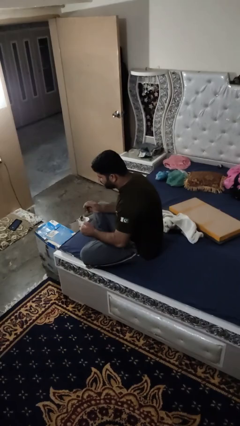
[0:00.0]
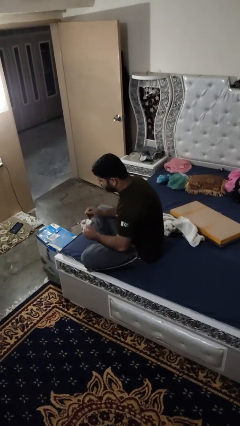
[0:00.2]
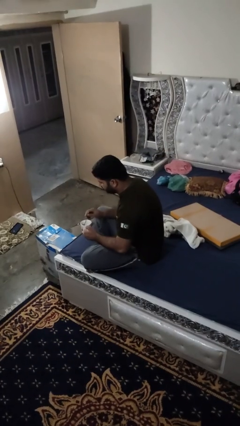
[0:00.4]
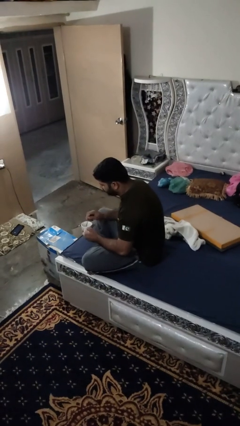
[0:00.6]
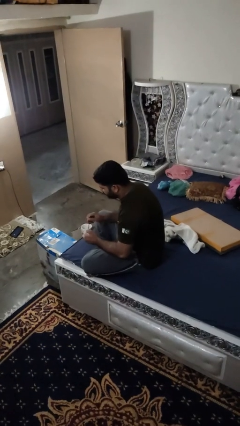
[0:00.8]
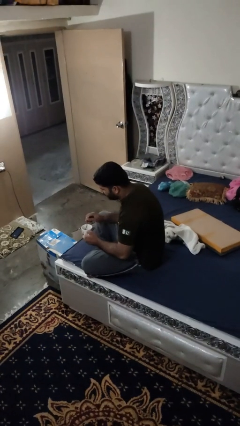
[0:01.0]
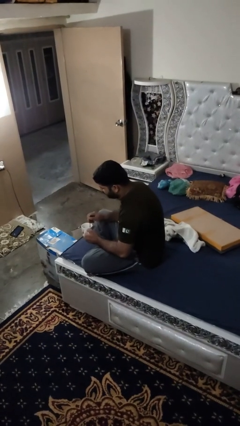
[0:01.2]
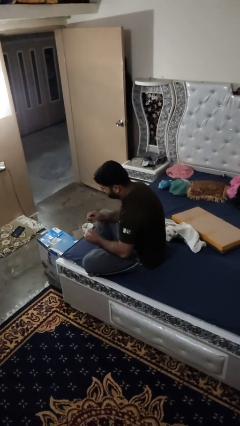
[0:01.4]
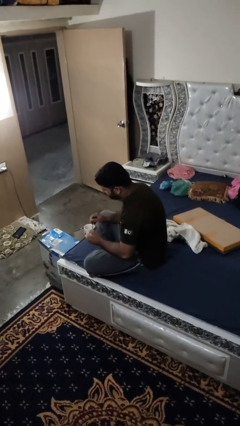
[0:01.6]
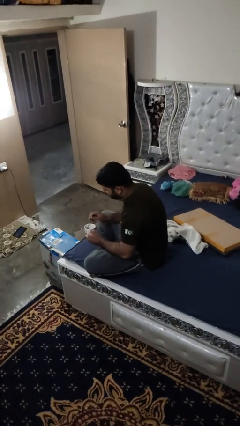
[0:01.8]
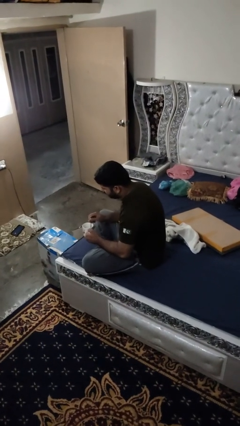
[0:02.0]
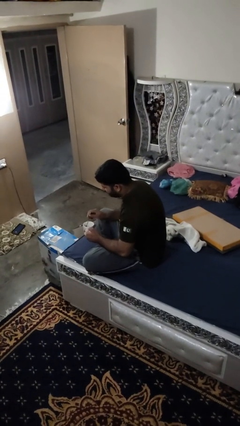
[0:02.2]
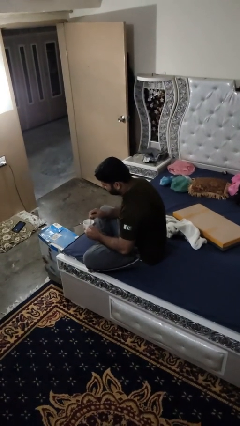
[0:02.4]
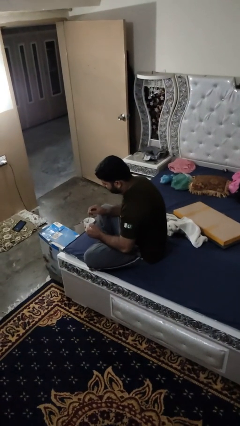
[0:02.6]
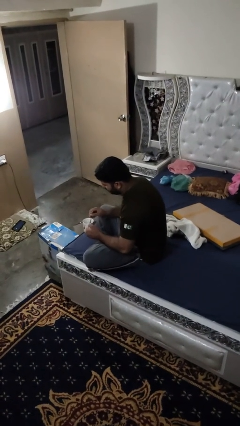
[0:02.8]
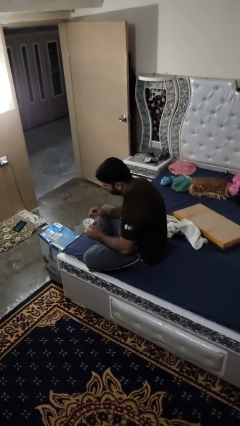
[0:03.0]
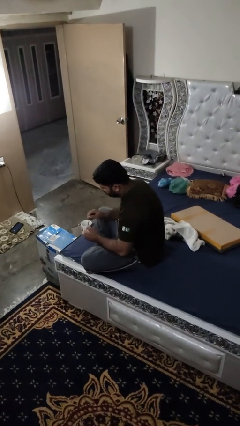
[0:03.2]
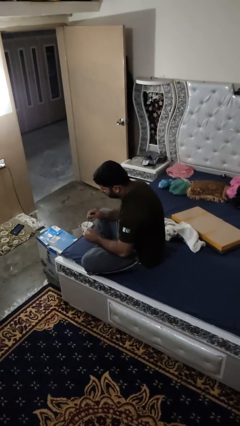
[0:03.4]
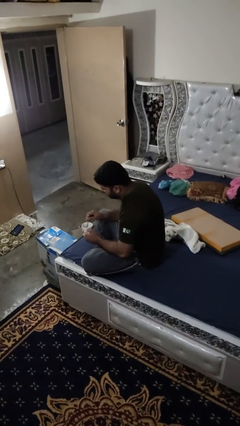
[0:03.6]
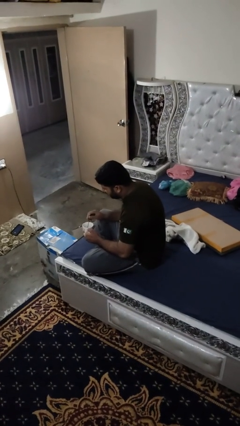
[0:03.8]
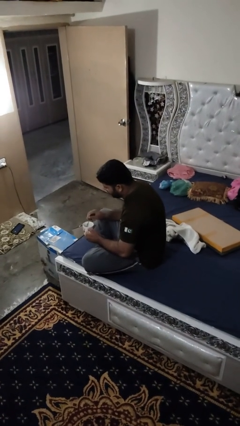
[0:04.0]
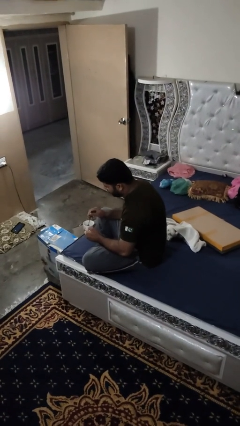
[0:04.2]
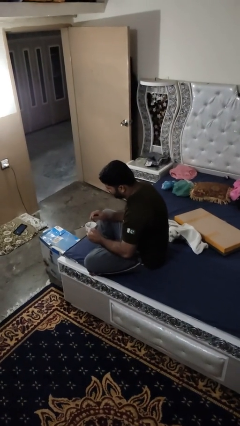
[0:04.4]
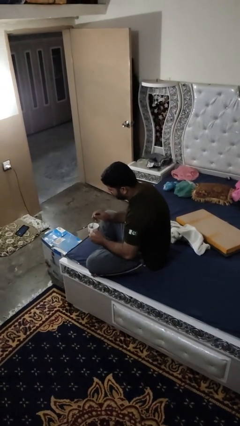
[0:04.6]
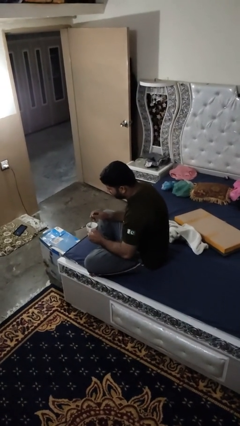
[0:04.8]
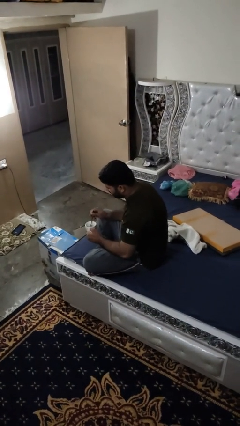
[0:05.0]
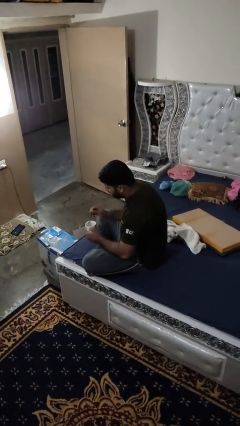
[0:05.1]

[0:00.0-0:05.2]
person stirs mug

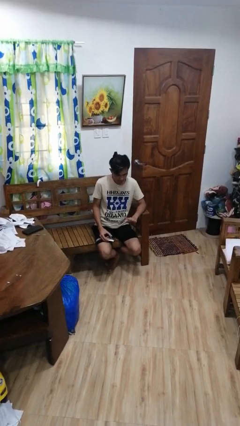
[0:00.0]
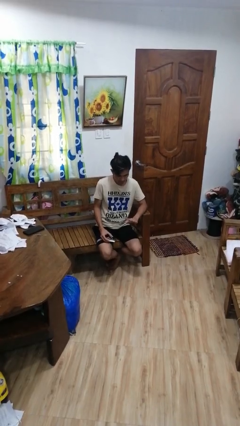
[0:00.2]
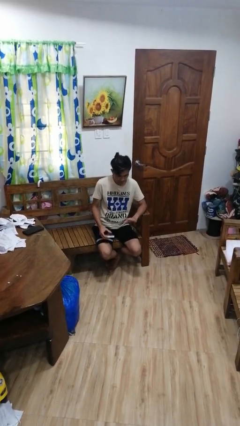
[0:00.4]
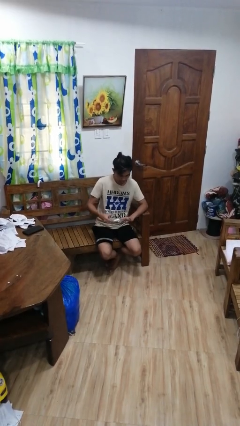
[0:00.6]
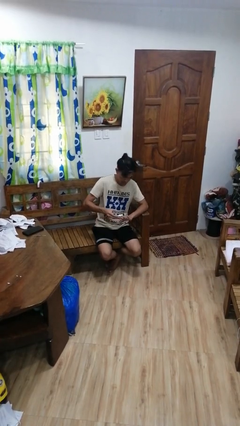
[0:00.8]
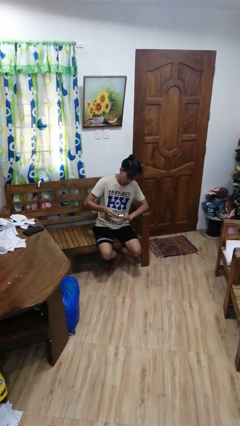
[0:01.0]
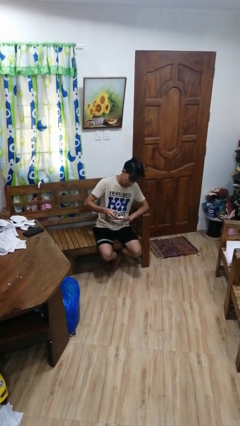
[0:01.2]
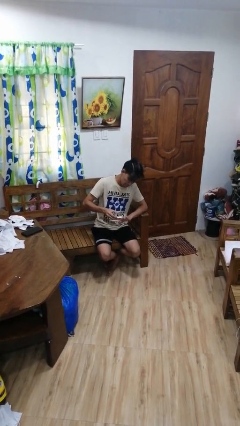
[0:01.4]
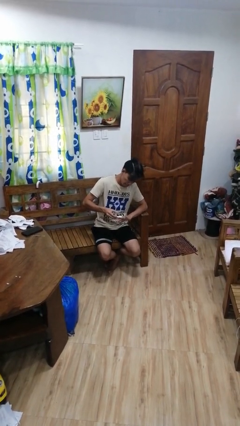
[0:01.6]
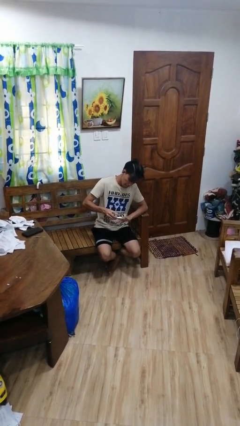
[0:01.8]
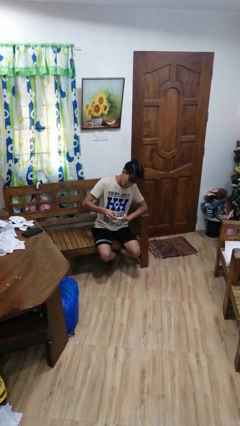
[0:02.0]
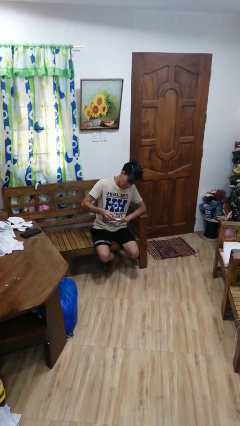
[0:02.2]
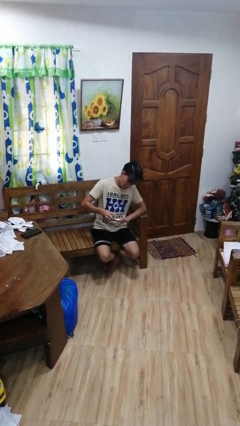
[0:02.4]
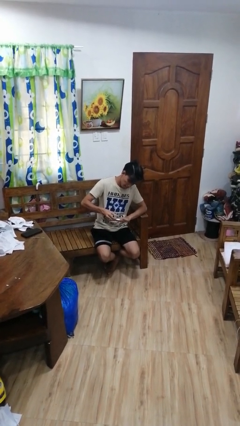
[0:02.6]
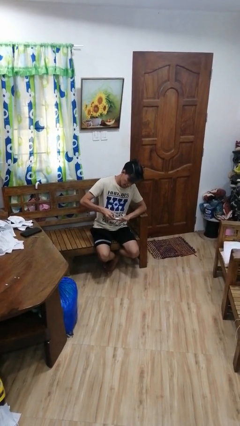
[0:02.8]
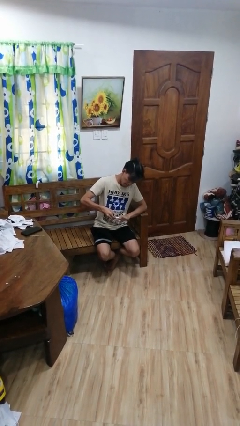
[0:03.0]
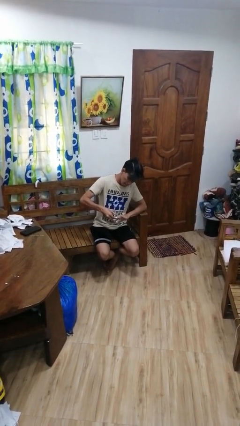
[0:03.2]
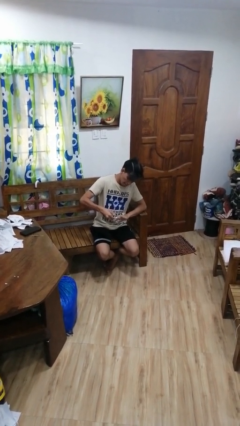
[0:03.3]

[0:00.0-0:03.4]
person clips fingernails

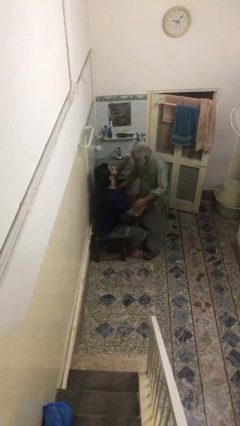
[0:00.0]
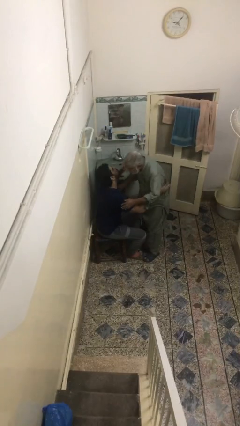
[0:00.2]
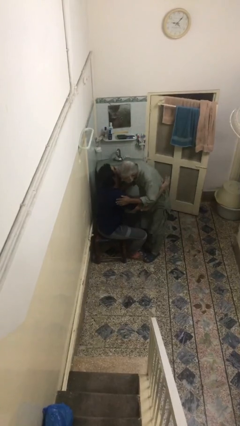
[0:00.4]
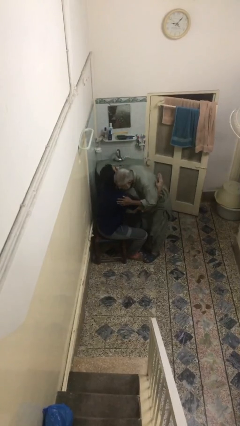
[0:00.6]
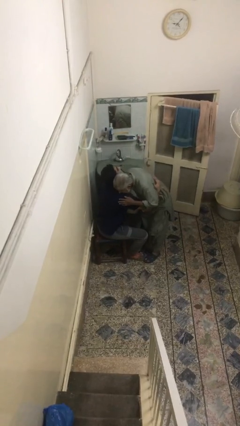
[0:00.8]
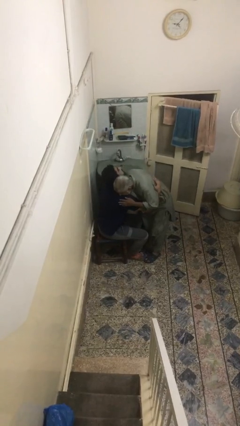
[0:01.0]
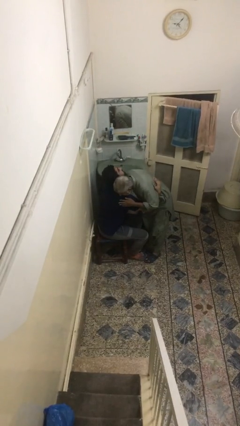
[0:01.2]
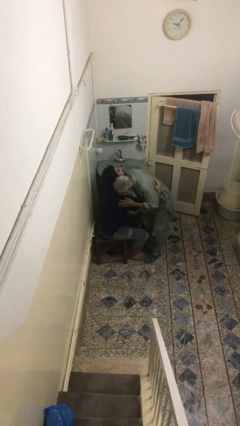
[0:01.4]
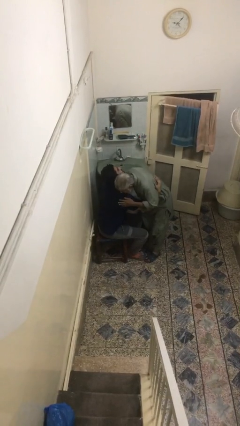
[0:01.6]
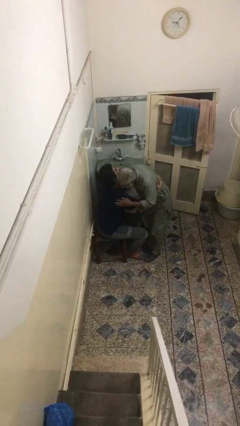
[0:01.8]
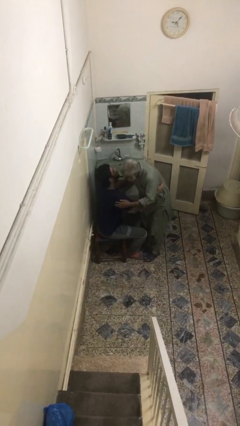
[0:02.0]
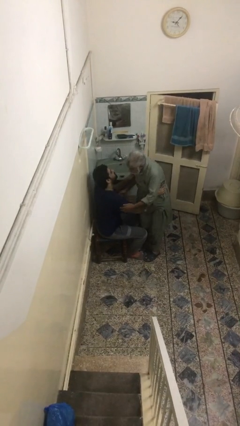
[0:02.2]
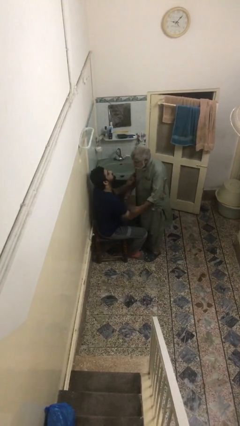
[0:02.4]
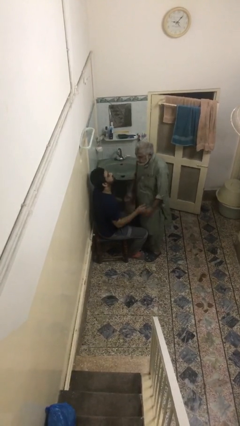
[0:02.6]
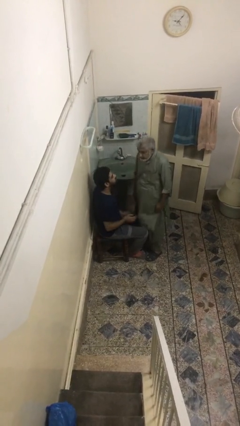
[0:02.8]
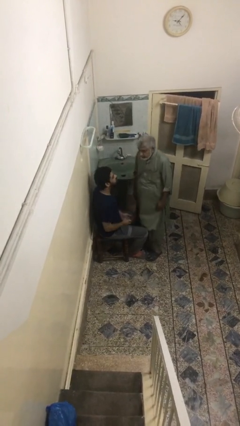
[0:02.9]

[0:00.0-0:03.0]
person embraces person

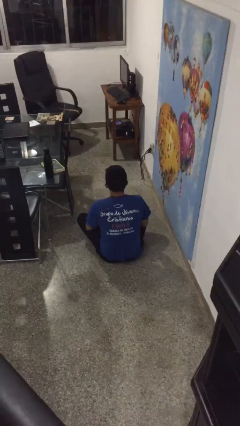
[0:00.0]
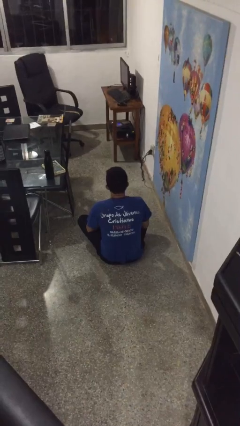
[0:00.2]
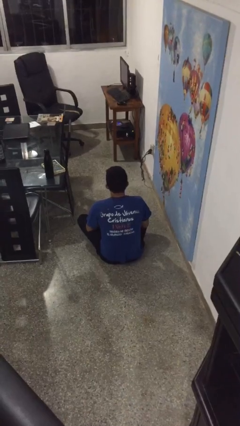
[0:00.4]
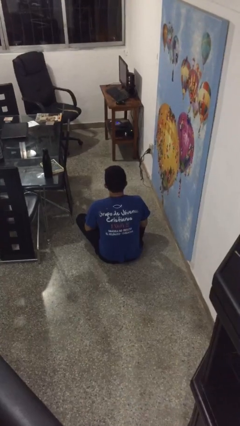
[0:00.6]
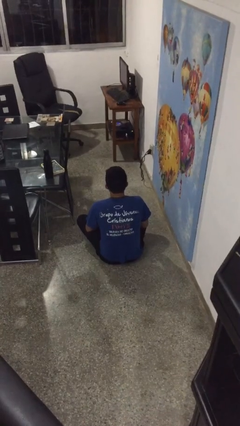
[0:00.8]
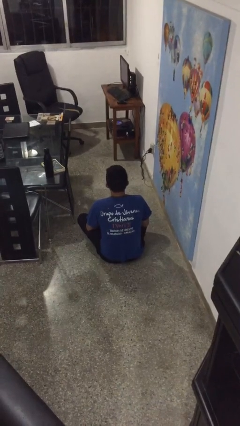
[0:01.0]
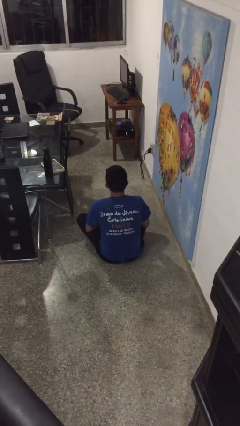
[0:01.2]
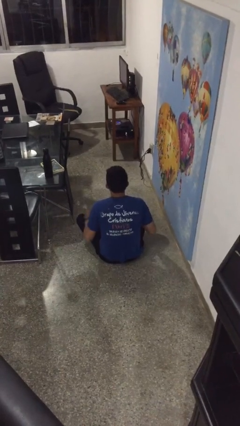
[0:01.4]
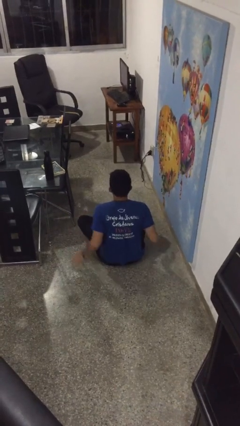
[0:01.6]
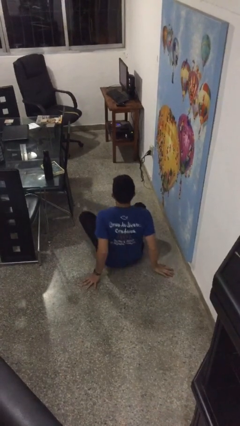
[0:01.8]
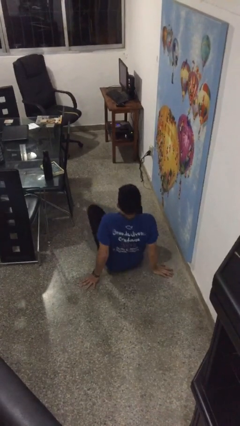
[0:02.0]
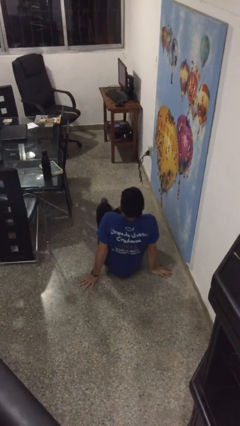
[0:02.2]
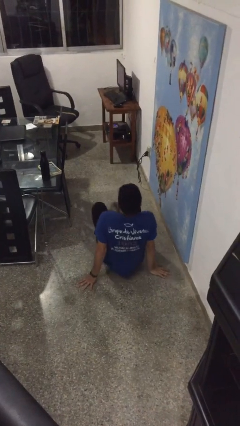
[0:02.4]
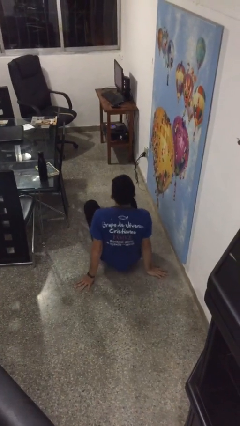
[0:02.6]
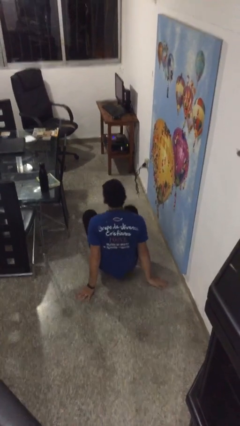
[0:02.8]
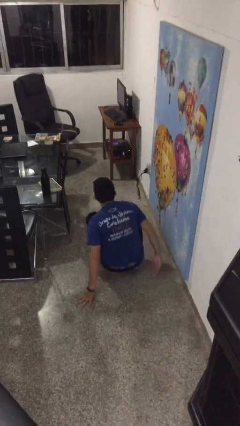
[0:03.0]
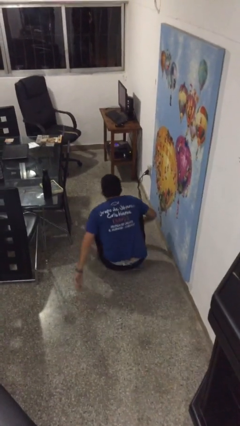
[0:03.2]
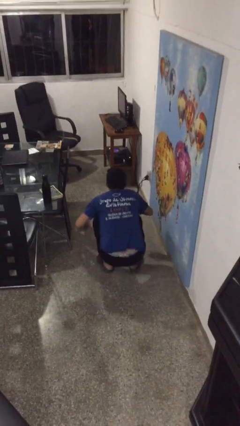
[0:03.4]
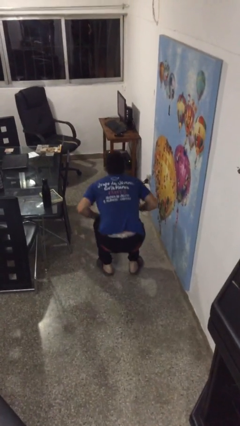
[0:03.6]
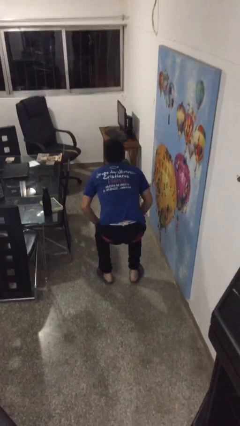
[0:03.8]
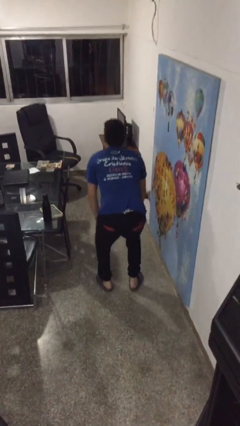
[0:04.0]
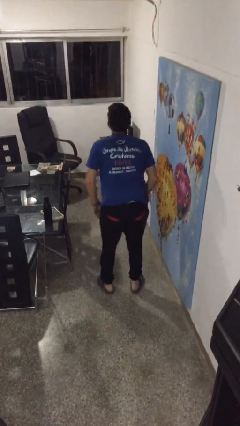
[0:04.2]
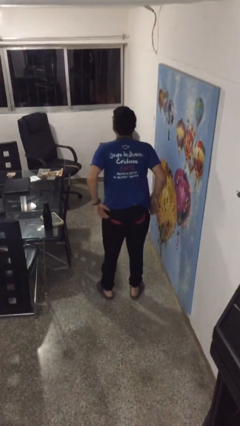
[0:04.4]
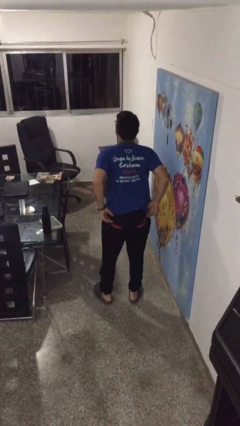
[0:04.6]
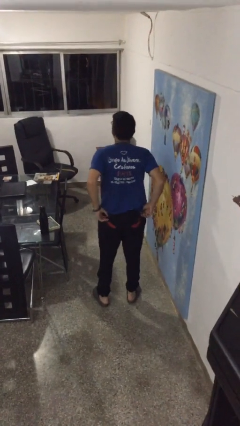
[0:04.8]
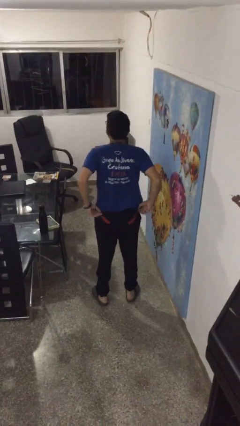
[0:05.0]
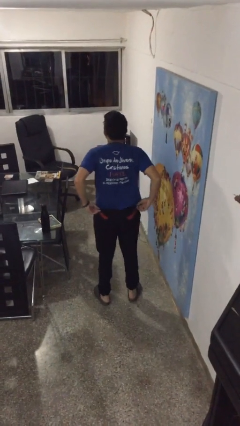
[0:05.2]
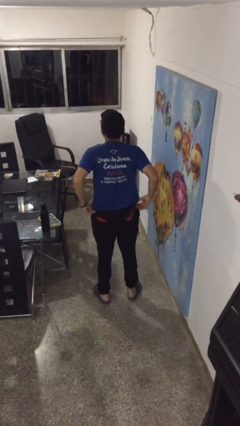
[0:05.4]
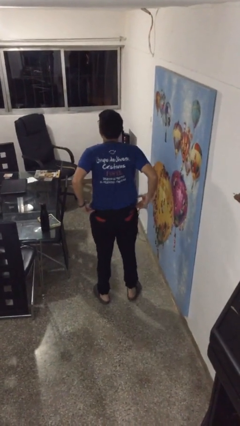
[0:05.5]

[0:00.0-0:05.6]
person stands up from floor

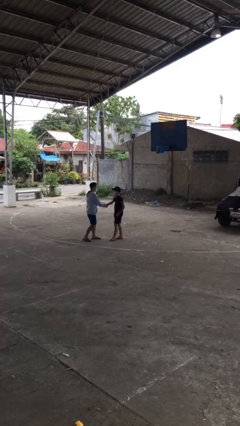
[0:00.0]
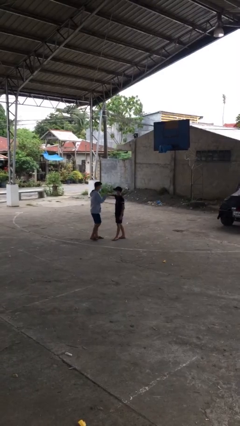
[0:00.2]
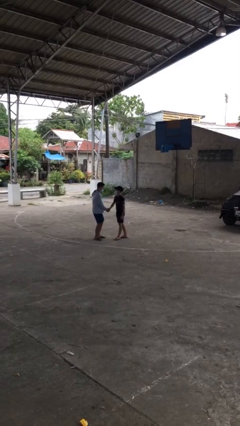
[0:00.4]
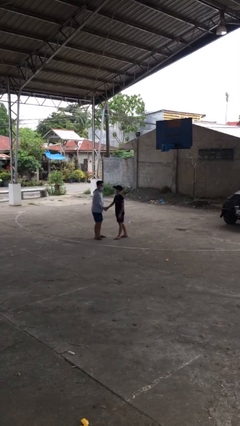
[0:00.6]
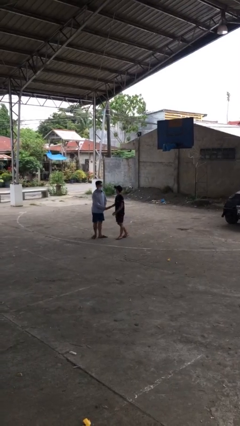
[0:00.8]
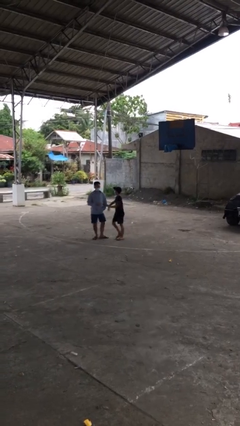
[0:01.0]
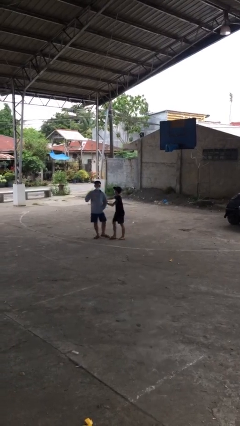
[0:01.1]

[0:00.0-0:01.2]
person shakes hand
